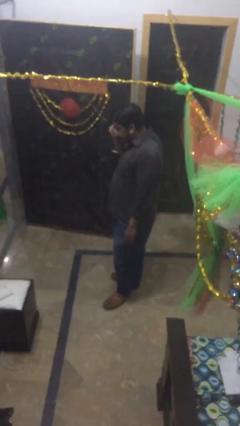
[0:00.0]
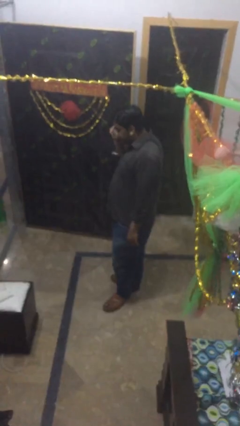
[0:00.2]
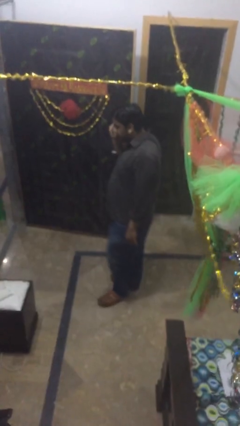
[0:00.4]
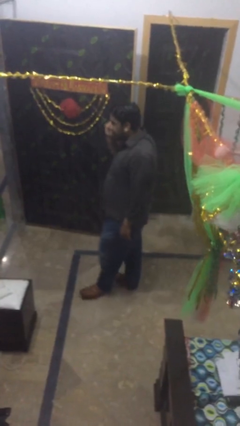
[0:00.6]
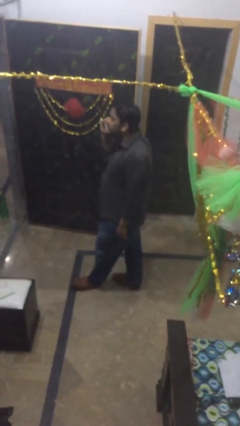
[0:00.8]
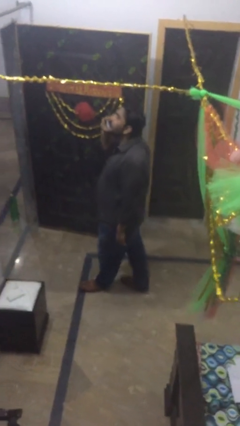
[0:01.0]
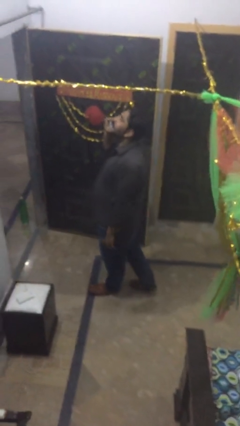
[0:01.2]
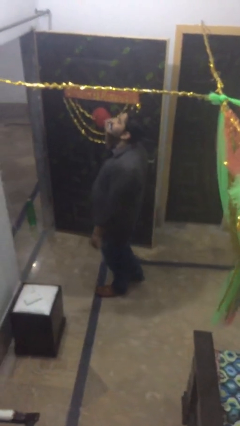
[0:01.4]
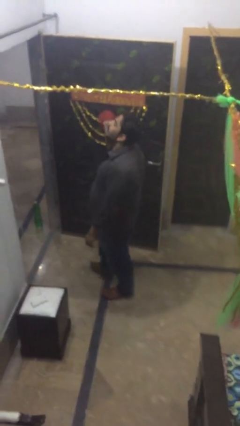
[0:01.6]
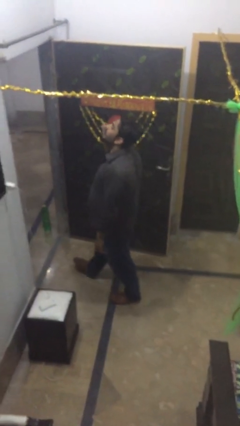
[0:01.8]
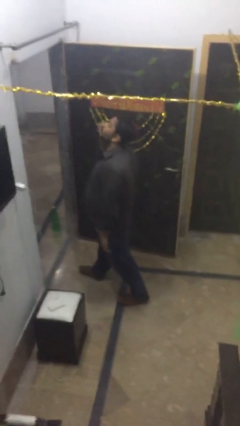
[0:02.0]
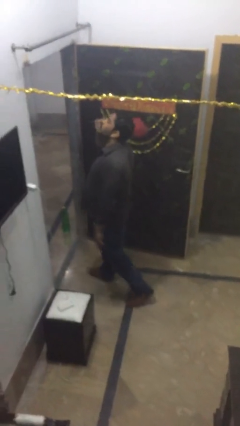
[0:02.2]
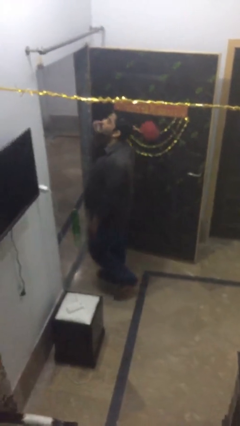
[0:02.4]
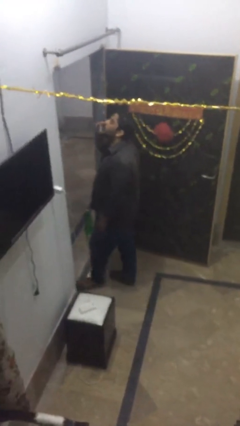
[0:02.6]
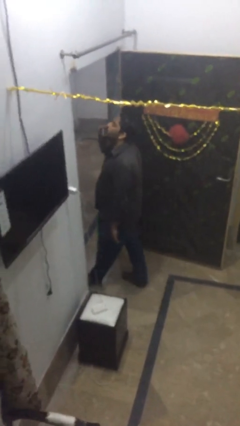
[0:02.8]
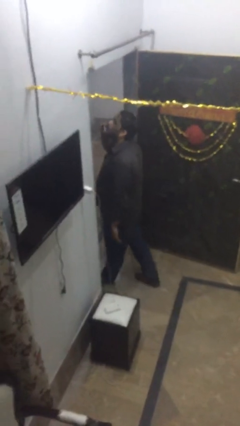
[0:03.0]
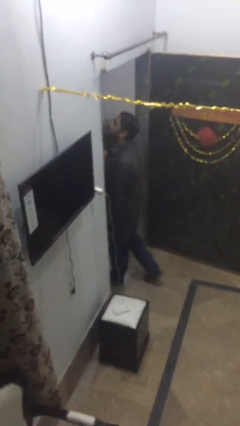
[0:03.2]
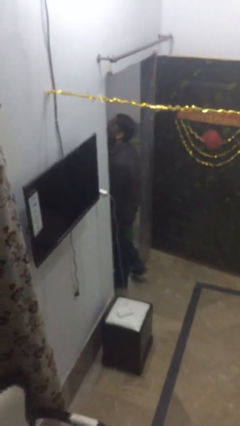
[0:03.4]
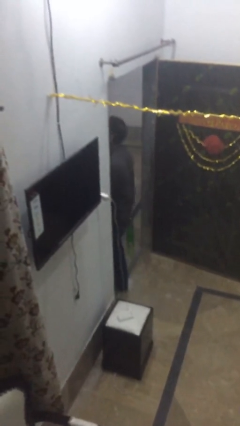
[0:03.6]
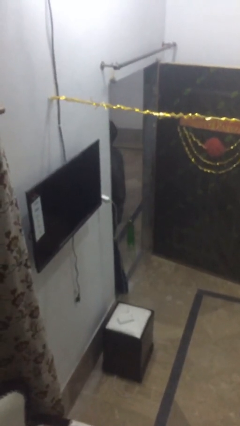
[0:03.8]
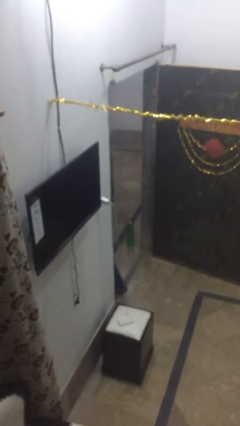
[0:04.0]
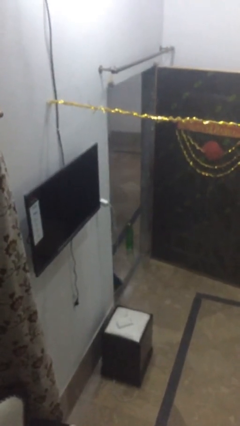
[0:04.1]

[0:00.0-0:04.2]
person exits scene through structure

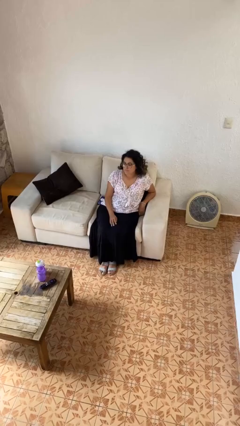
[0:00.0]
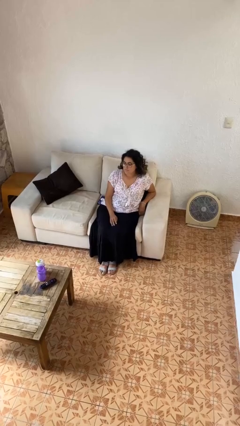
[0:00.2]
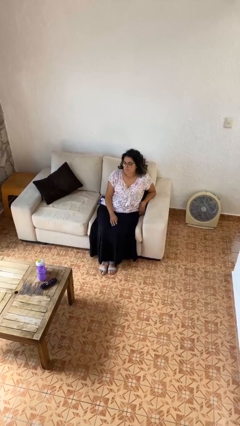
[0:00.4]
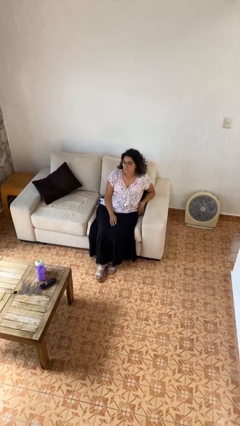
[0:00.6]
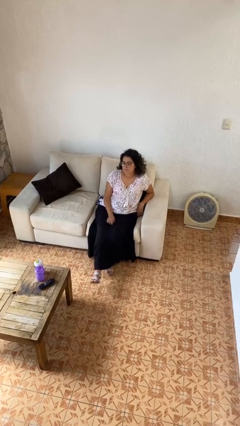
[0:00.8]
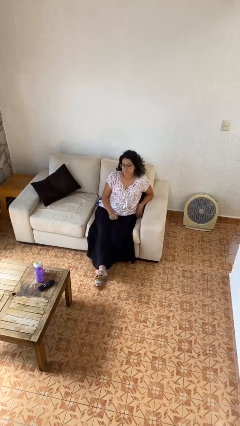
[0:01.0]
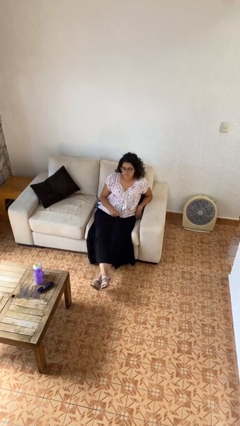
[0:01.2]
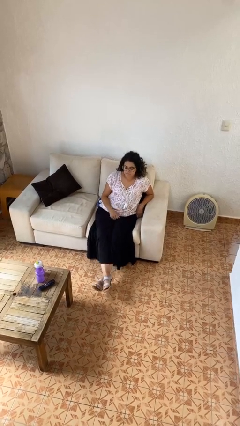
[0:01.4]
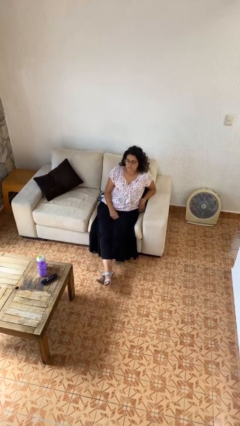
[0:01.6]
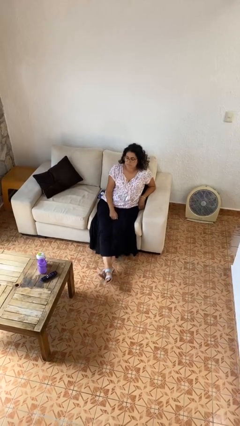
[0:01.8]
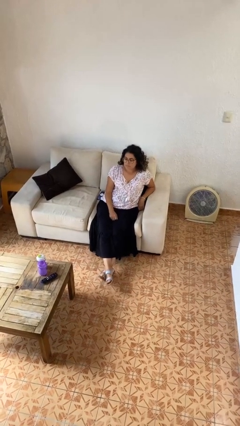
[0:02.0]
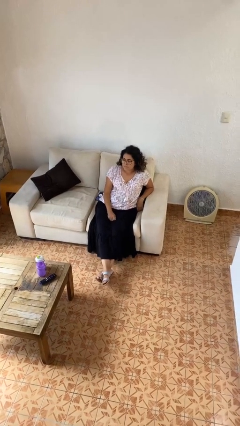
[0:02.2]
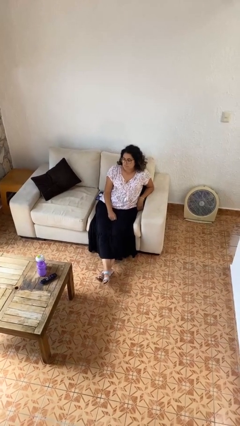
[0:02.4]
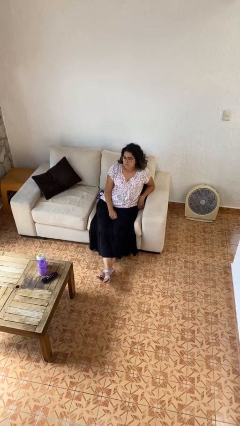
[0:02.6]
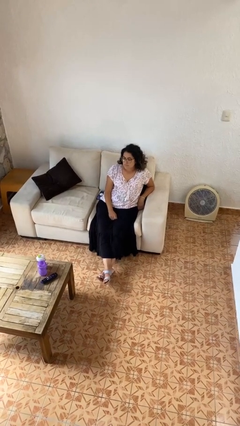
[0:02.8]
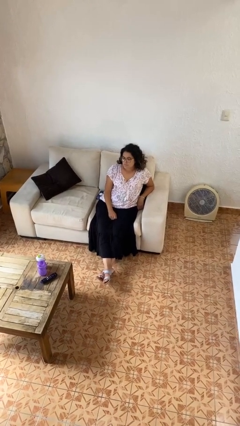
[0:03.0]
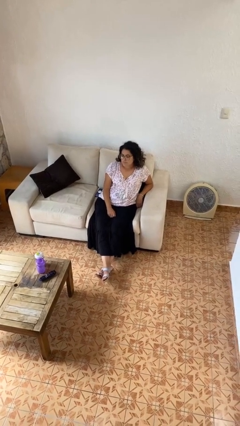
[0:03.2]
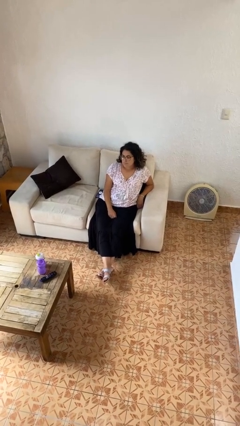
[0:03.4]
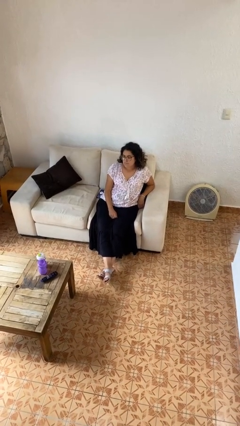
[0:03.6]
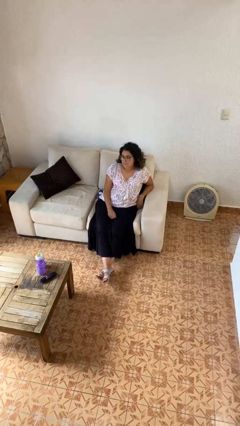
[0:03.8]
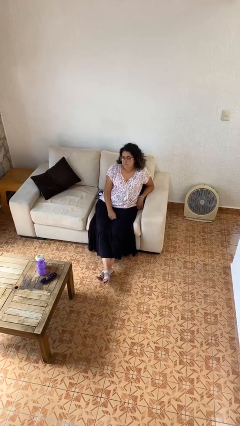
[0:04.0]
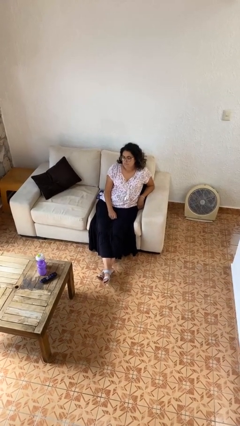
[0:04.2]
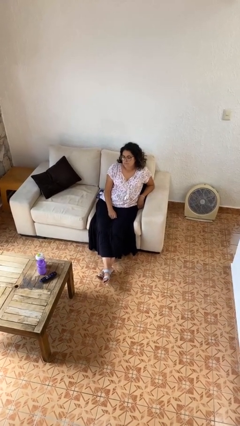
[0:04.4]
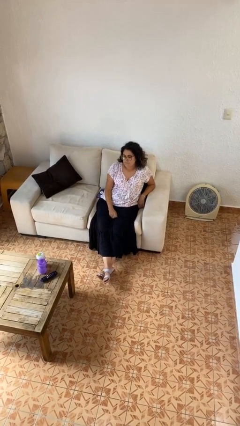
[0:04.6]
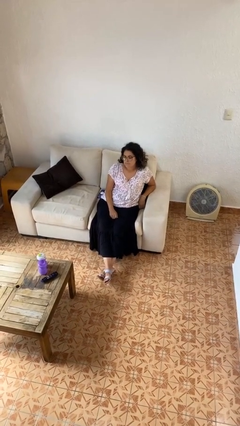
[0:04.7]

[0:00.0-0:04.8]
person crosses legs

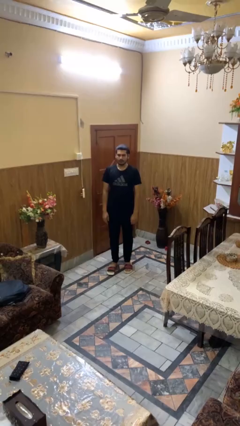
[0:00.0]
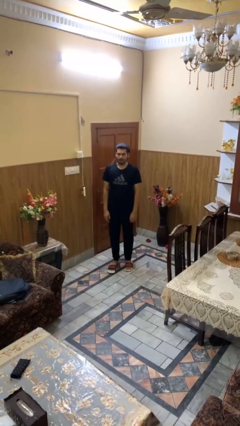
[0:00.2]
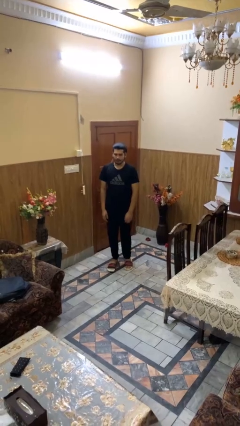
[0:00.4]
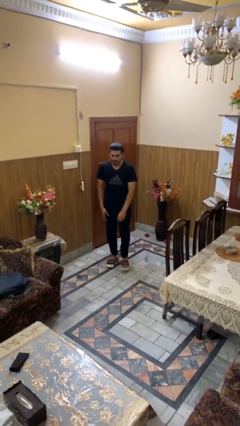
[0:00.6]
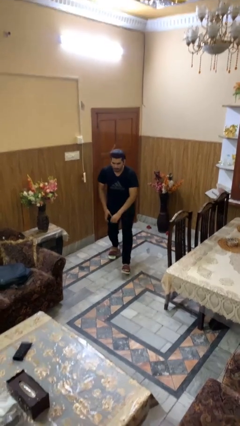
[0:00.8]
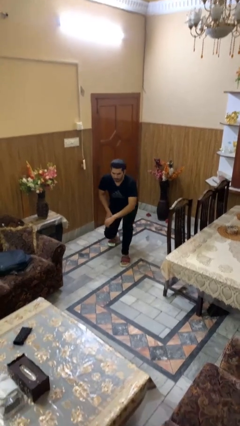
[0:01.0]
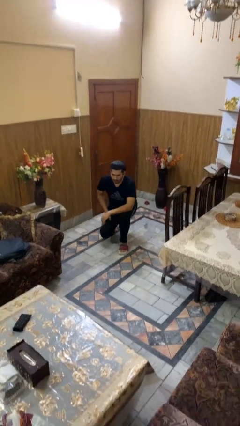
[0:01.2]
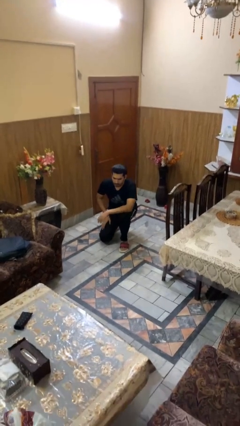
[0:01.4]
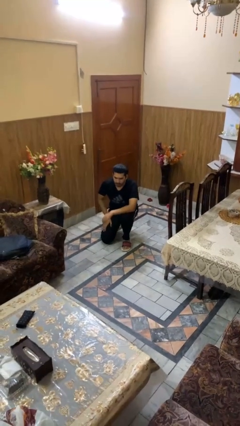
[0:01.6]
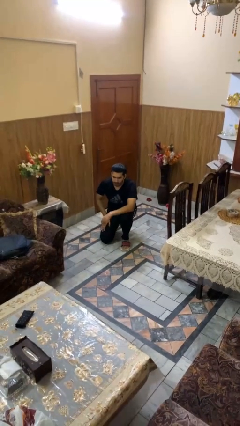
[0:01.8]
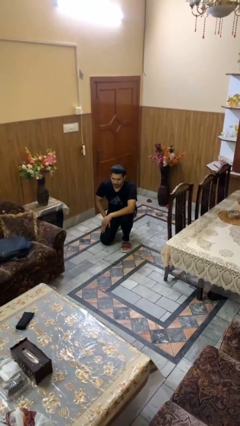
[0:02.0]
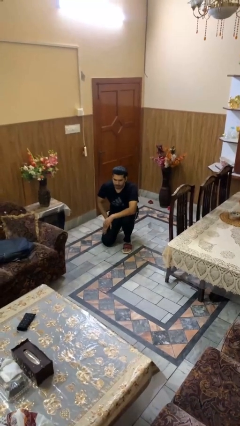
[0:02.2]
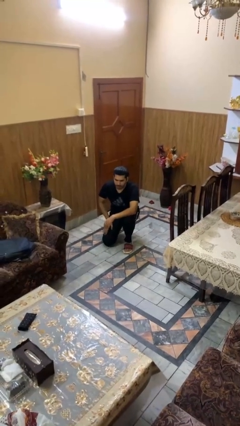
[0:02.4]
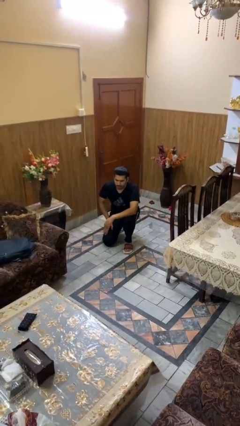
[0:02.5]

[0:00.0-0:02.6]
person kneels

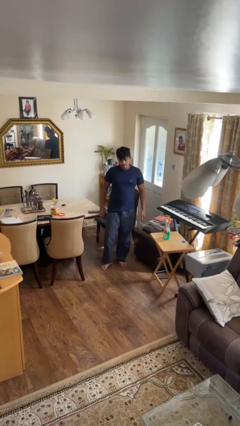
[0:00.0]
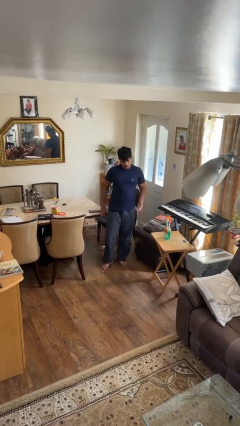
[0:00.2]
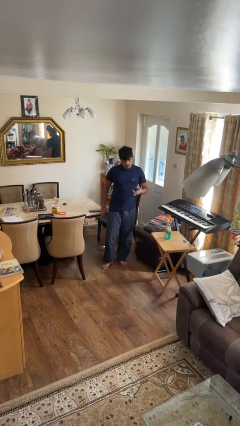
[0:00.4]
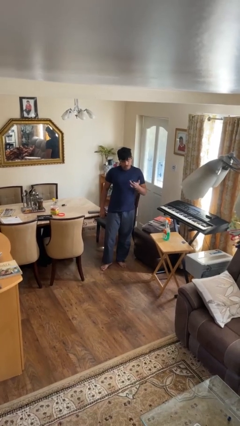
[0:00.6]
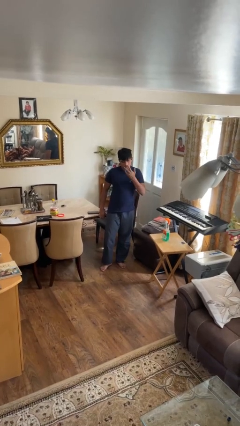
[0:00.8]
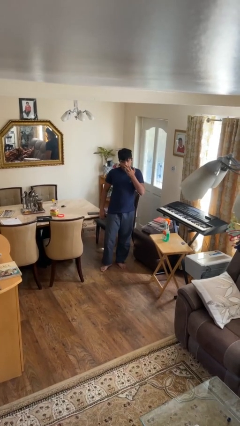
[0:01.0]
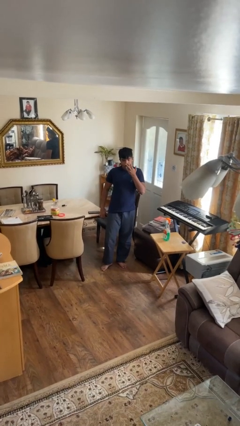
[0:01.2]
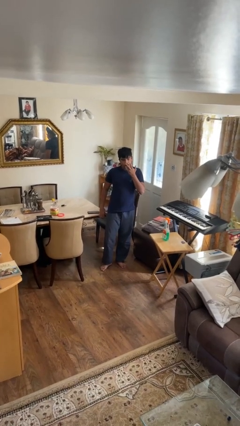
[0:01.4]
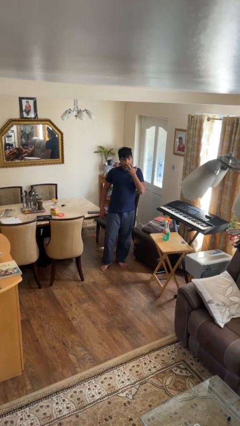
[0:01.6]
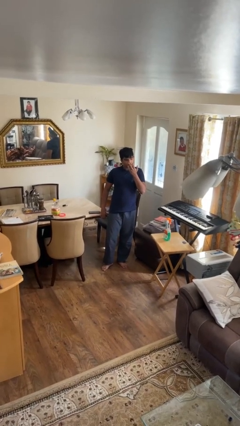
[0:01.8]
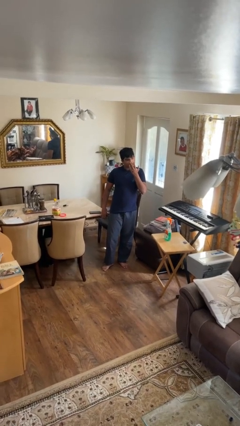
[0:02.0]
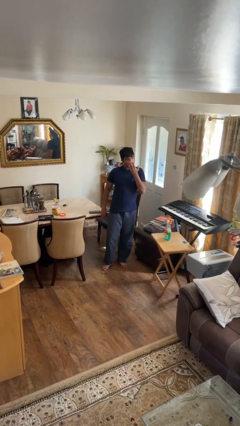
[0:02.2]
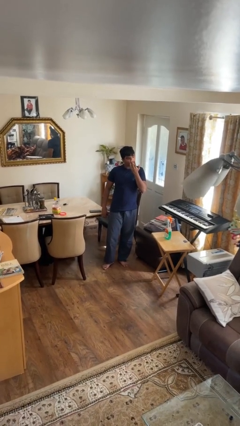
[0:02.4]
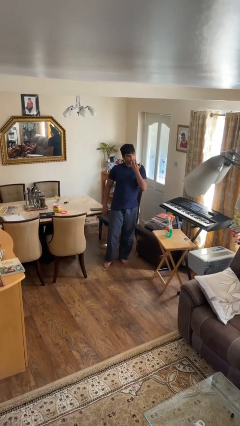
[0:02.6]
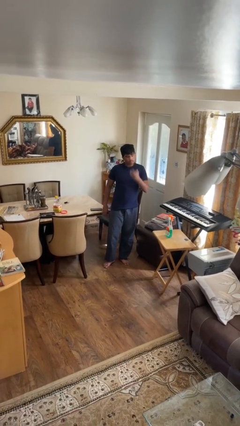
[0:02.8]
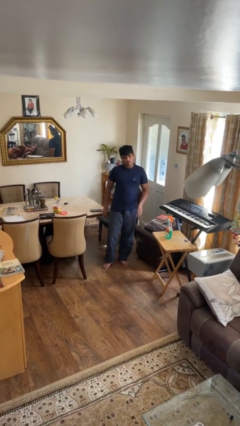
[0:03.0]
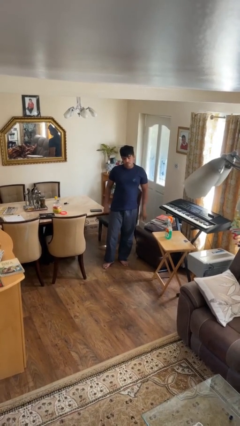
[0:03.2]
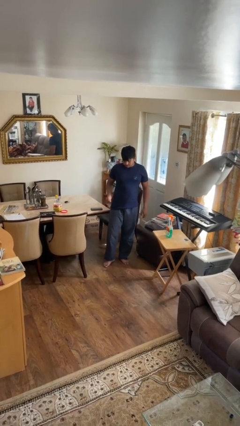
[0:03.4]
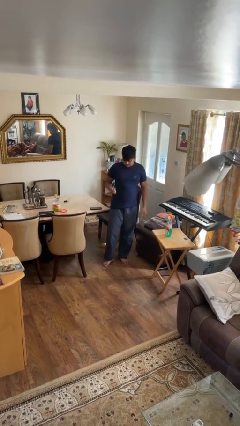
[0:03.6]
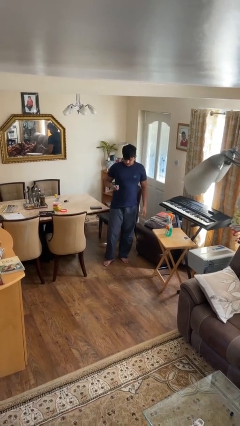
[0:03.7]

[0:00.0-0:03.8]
person licks fingers

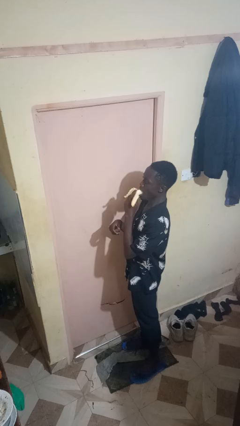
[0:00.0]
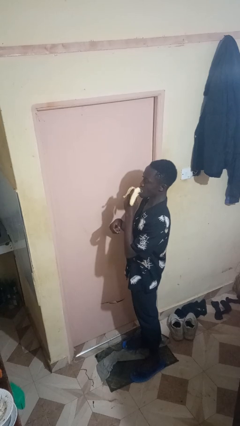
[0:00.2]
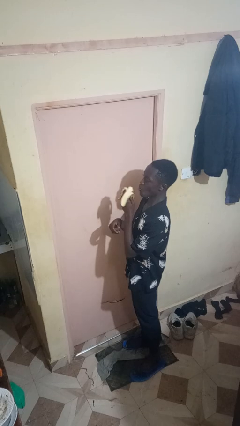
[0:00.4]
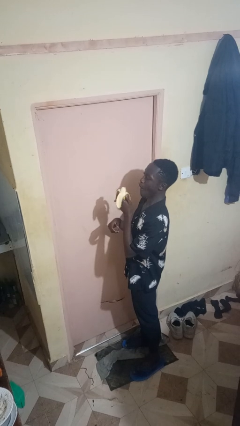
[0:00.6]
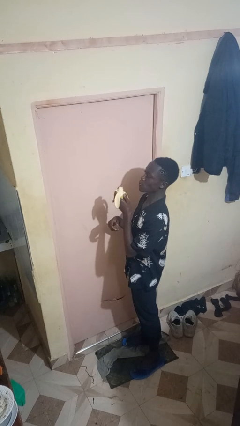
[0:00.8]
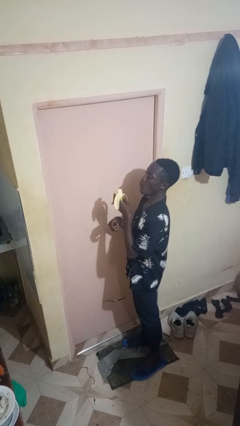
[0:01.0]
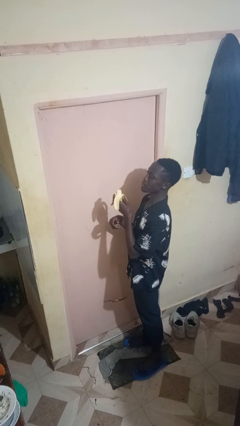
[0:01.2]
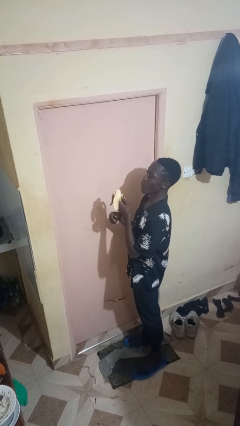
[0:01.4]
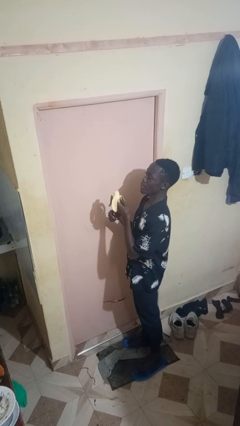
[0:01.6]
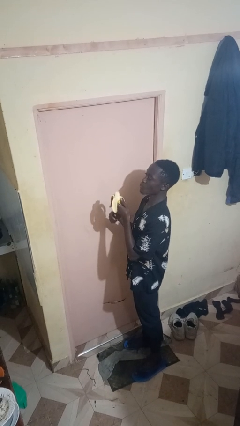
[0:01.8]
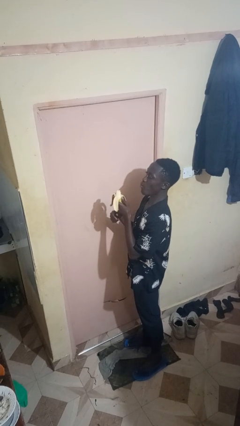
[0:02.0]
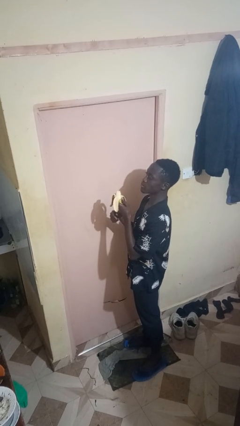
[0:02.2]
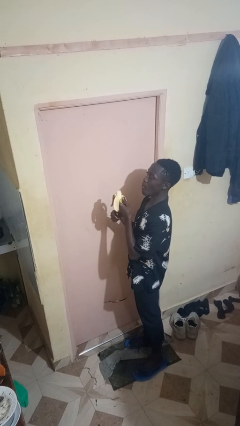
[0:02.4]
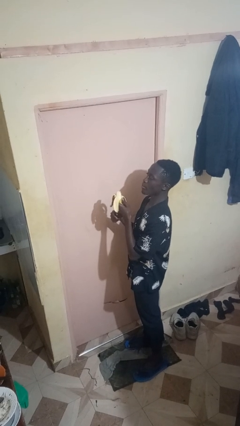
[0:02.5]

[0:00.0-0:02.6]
person eats banana
